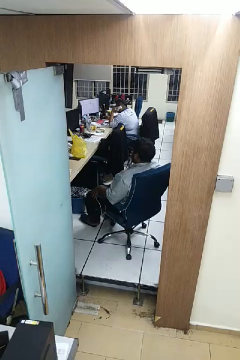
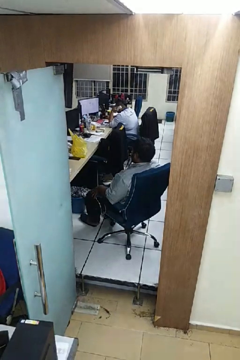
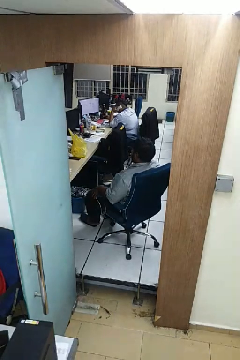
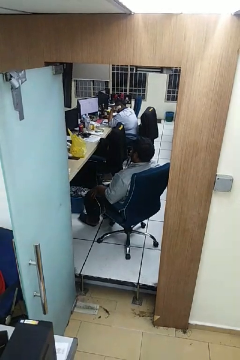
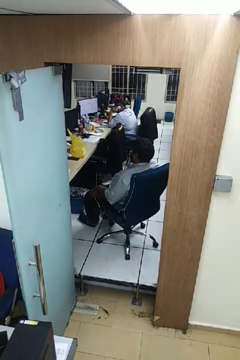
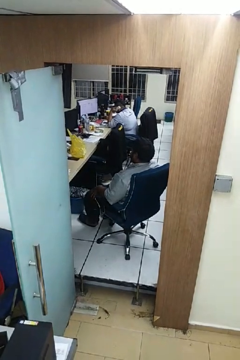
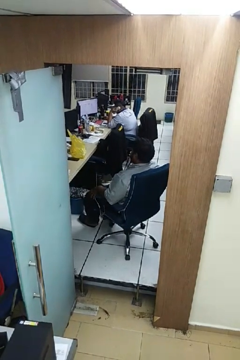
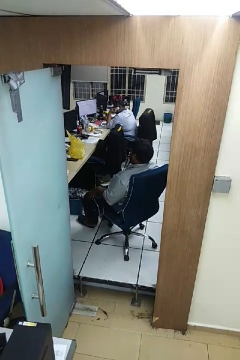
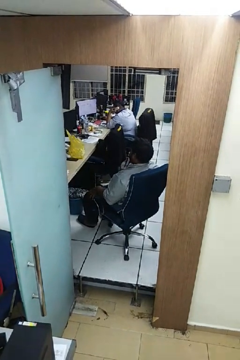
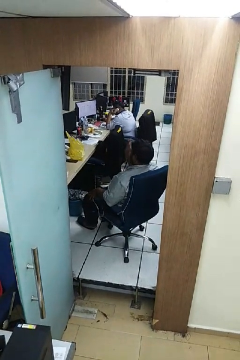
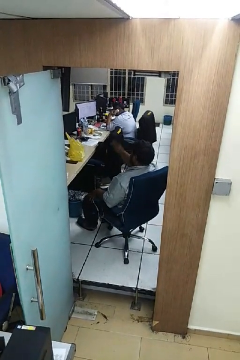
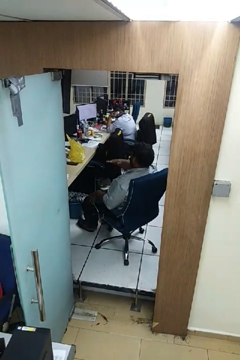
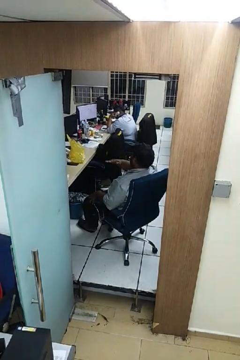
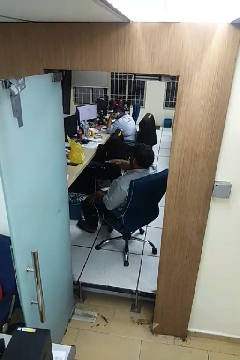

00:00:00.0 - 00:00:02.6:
person gestures swipe left

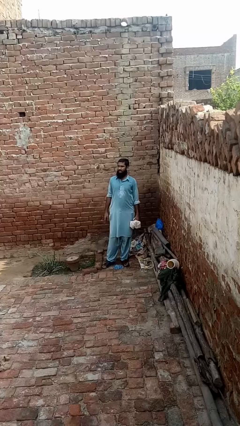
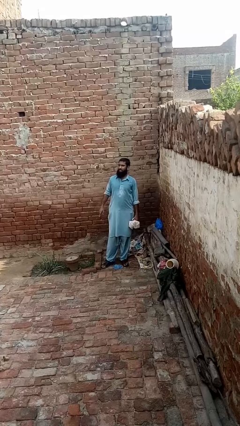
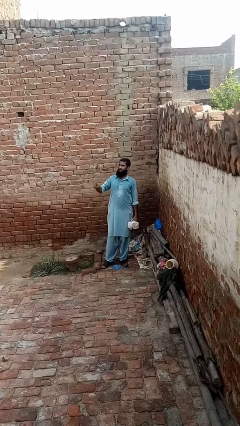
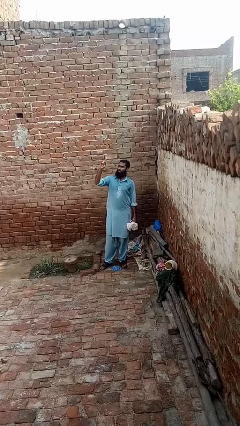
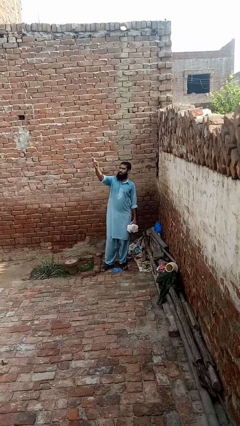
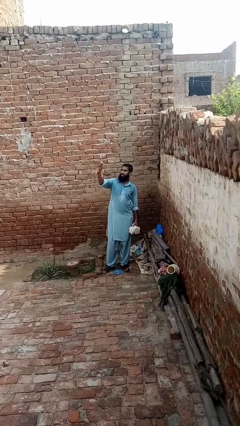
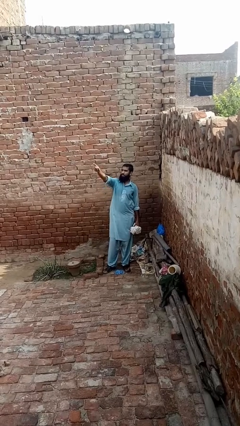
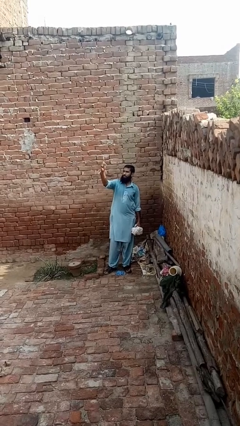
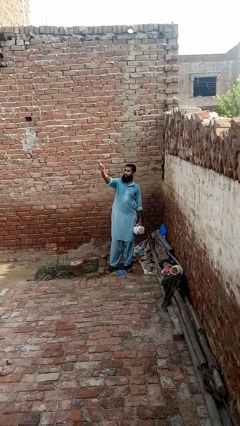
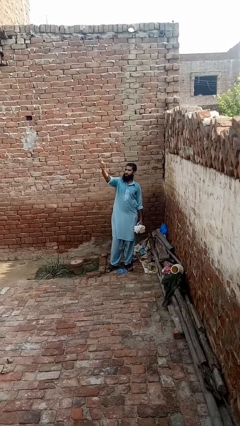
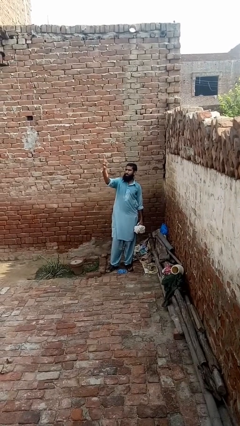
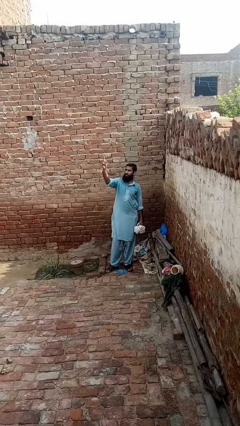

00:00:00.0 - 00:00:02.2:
person points at person

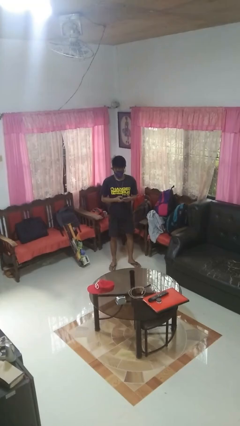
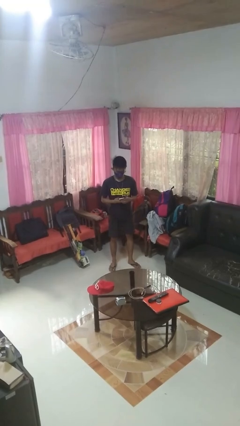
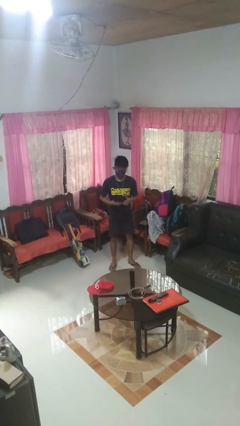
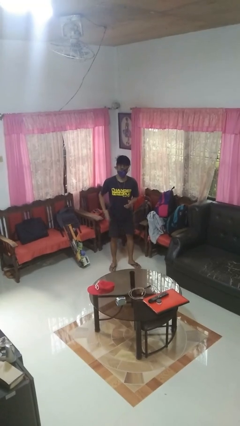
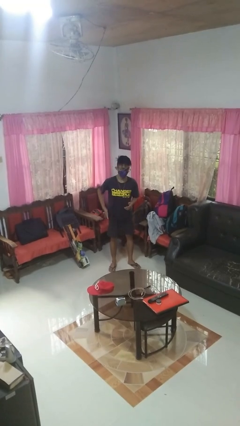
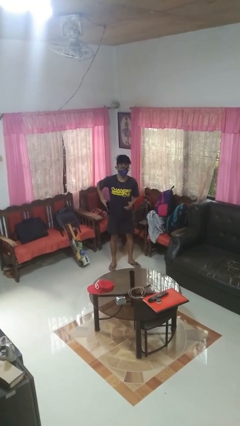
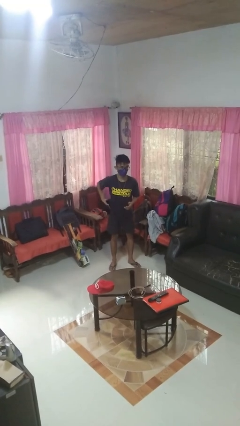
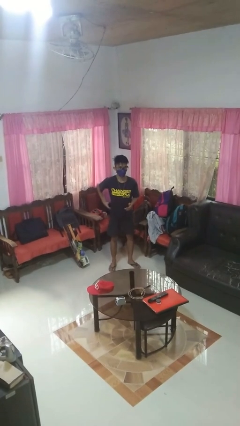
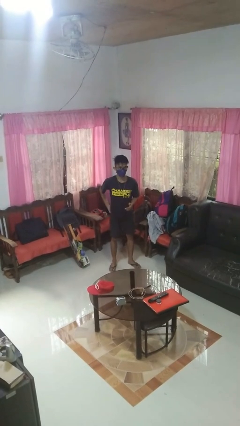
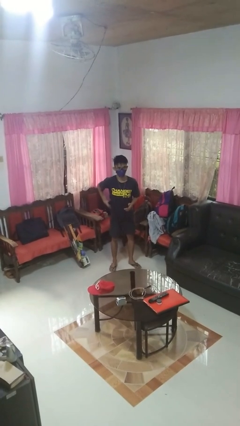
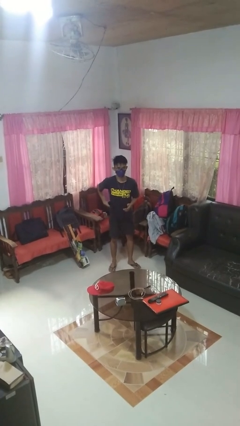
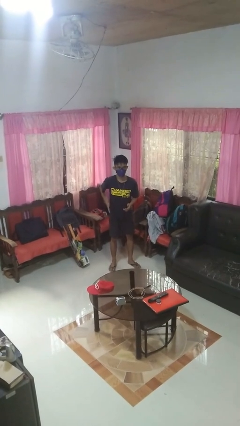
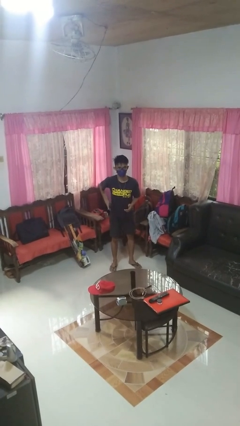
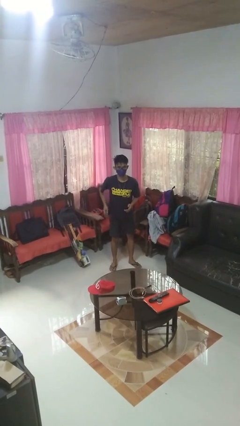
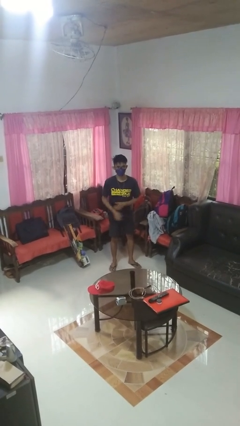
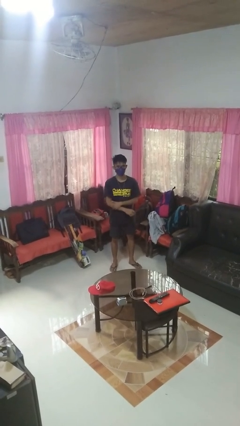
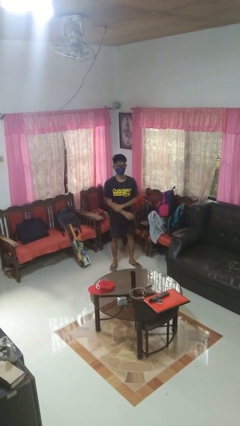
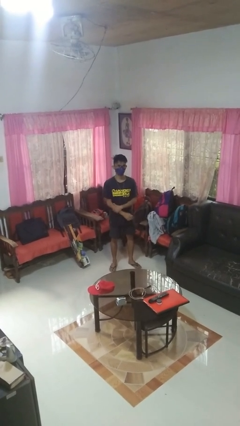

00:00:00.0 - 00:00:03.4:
person puts phone into pocket

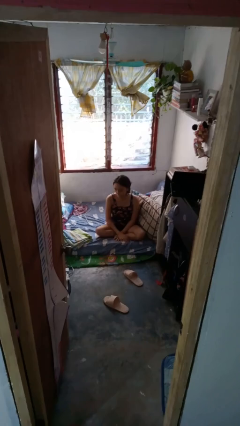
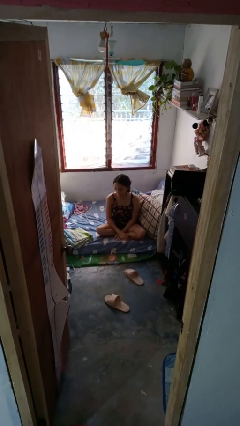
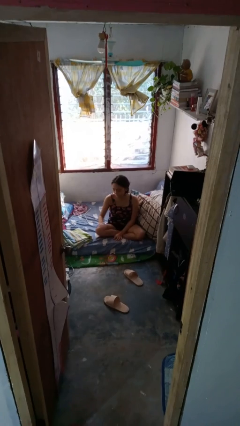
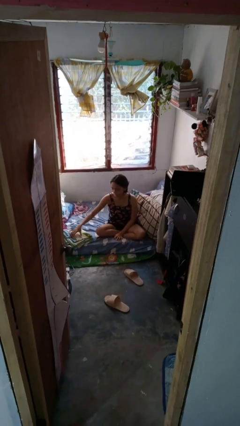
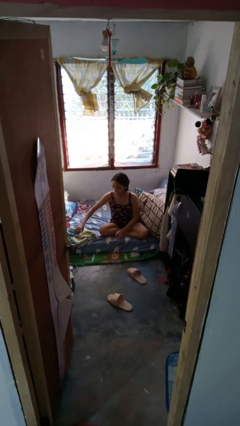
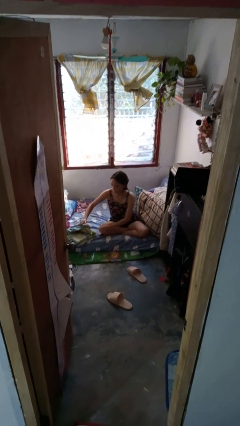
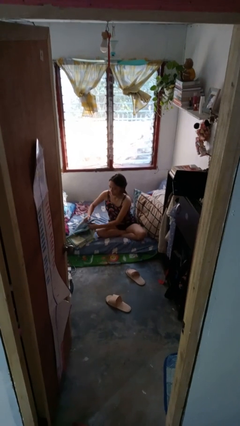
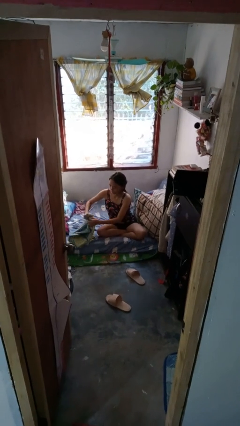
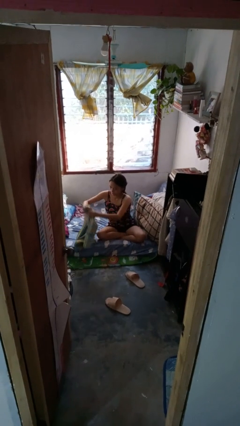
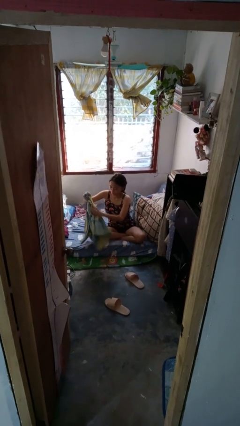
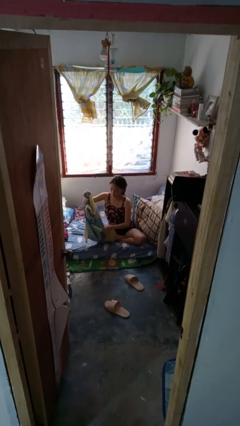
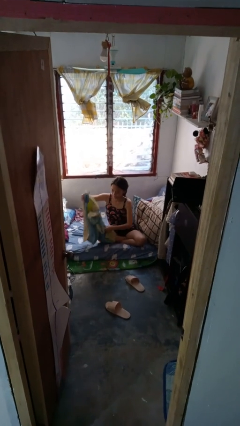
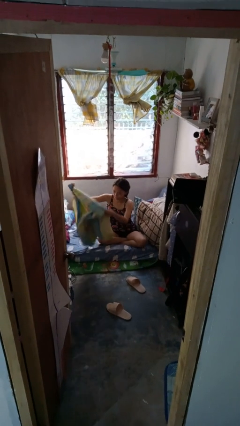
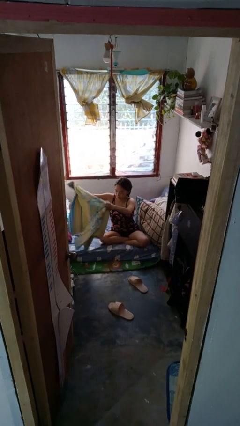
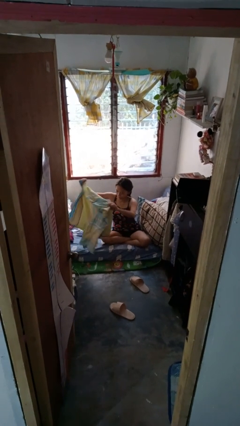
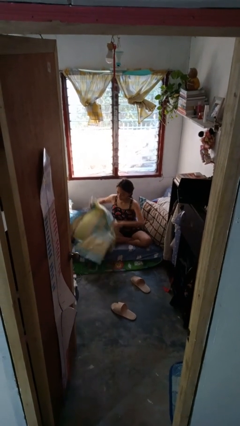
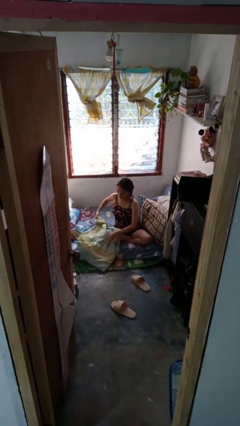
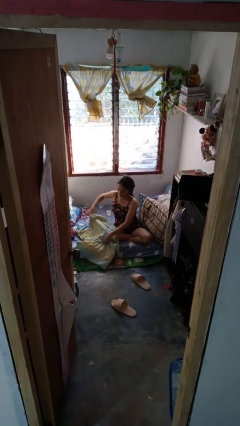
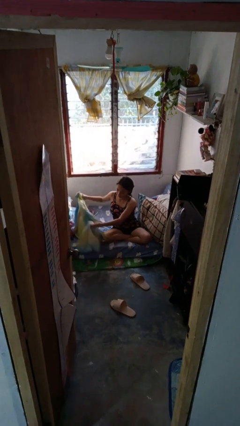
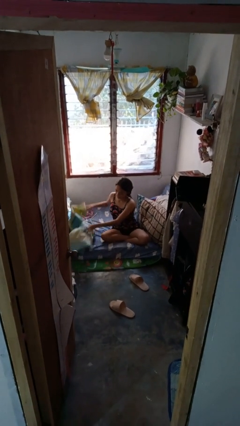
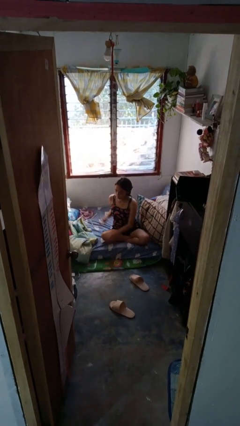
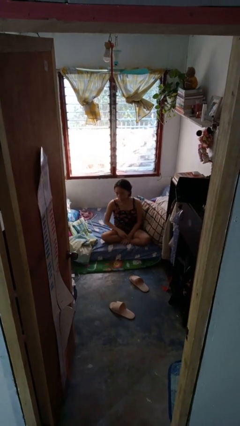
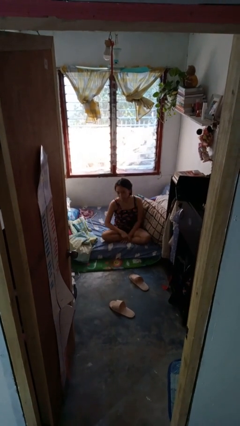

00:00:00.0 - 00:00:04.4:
person unfolds blanket

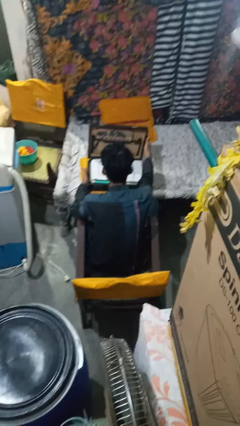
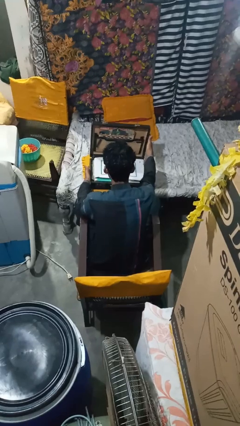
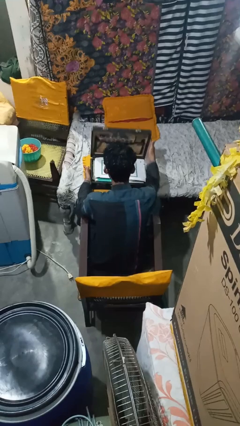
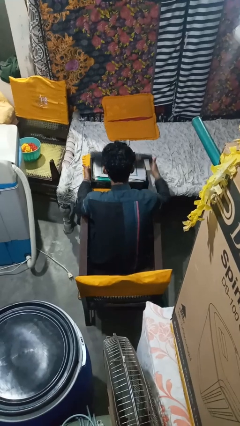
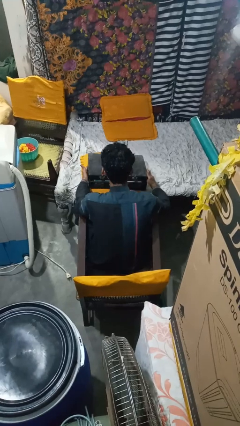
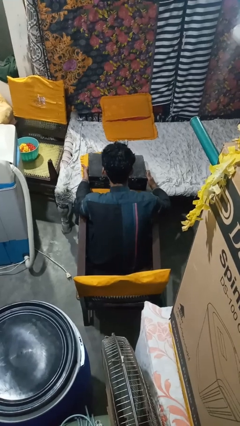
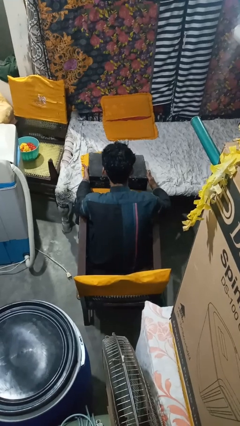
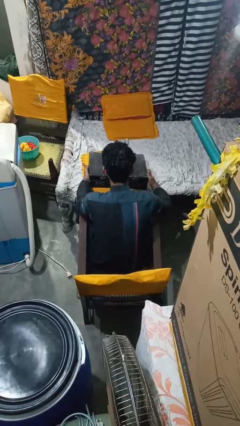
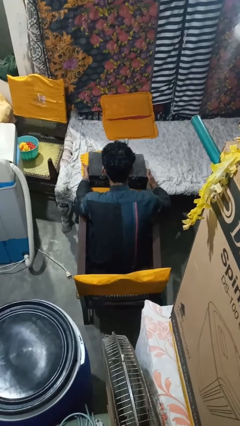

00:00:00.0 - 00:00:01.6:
person closes suitcase

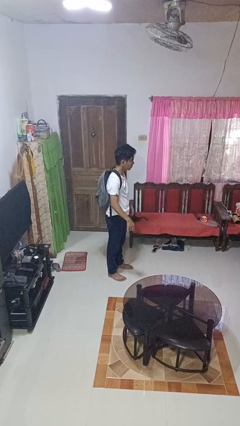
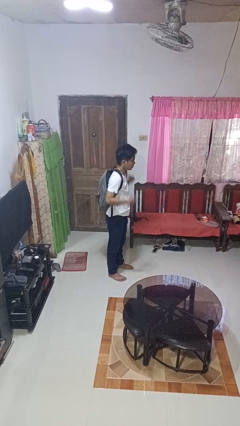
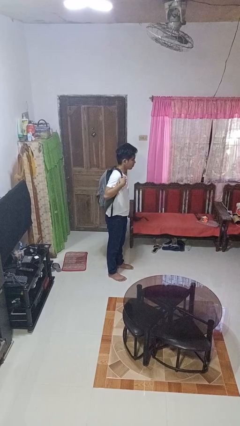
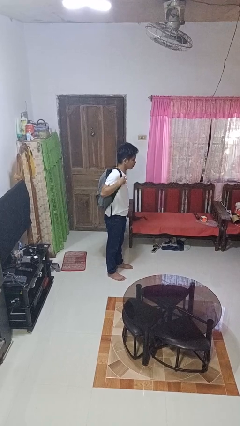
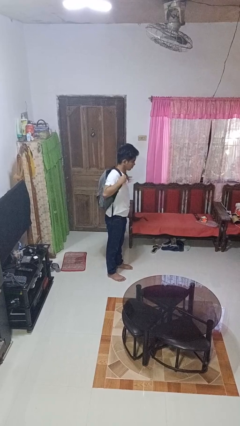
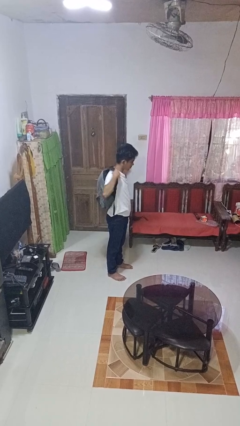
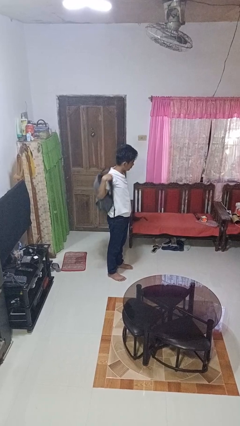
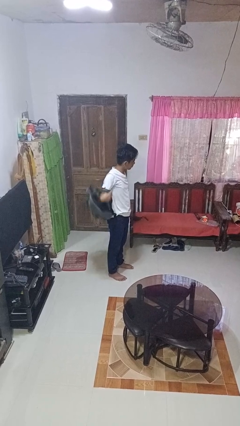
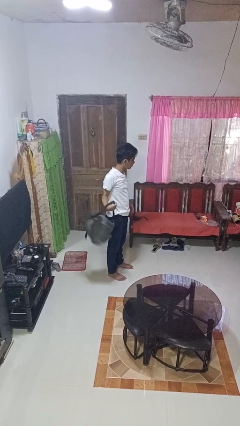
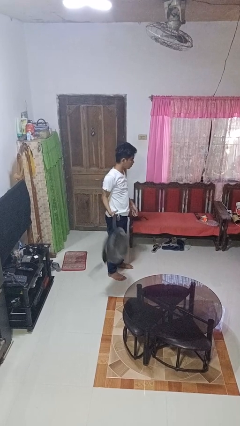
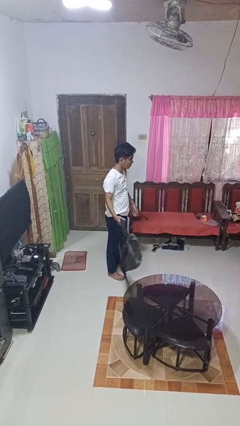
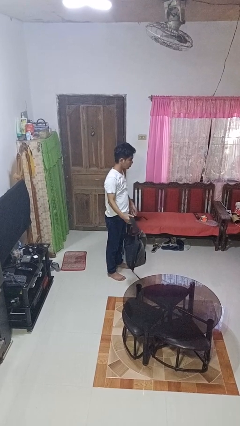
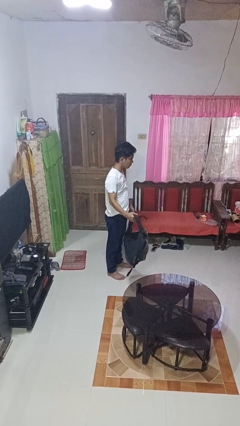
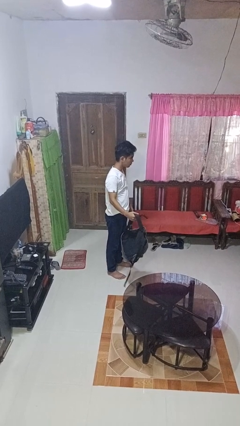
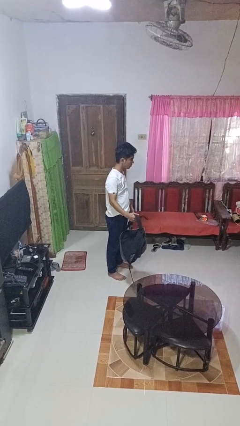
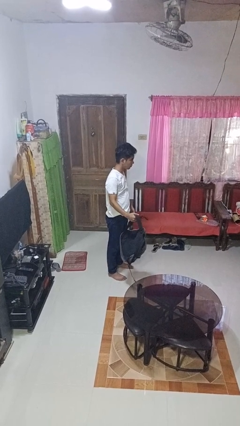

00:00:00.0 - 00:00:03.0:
person takes off backpack

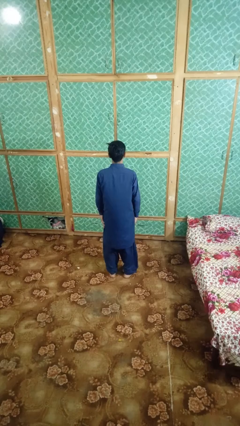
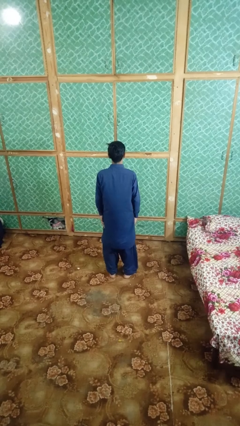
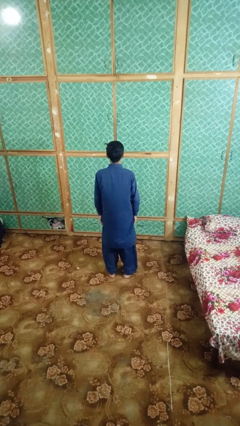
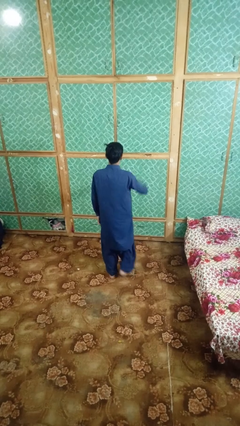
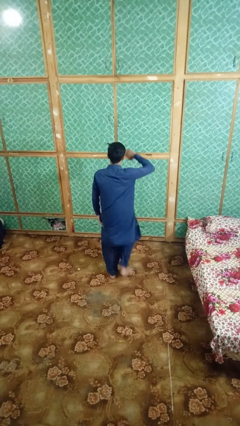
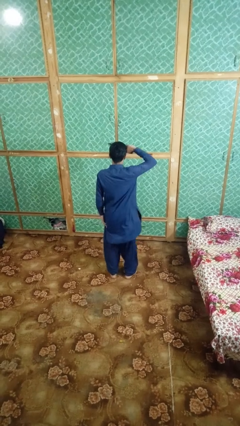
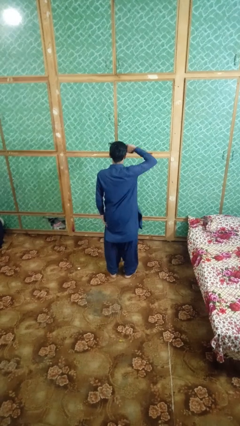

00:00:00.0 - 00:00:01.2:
person salutes
